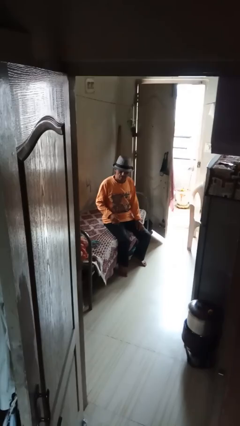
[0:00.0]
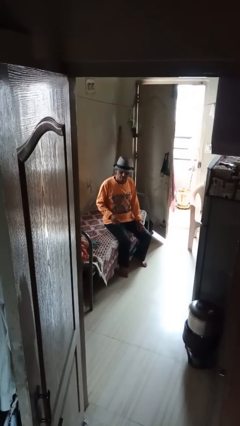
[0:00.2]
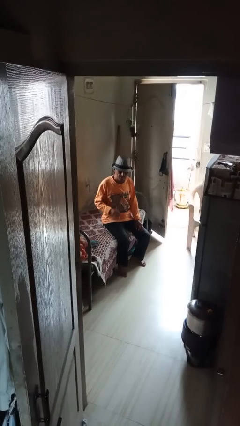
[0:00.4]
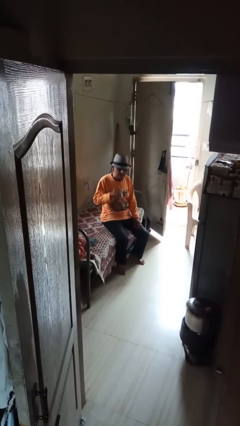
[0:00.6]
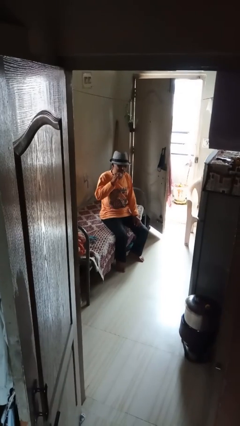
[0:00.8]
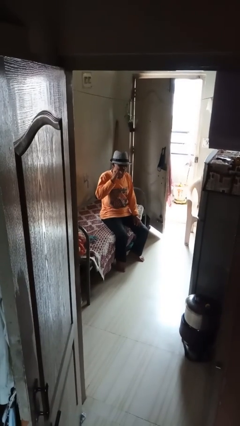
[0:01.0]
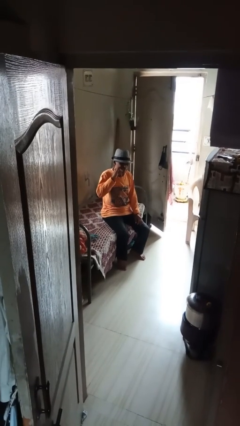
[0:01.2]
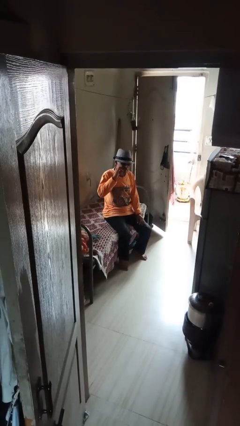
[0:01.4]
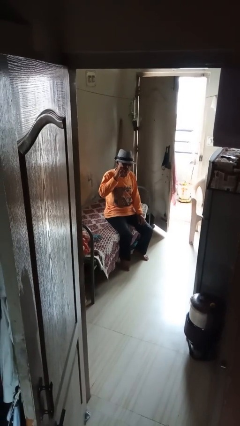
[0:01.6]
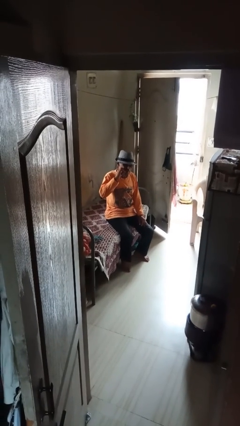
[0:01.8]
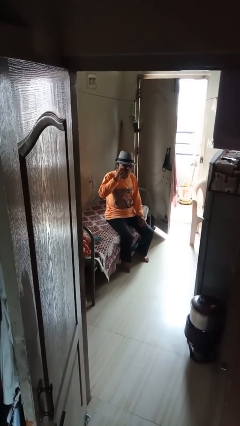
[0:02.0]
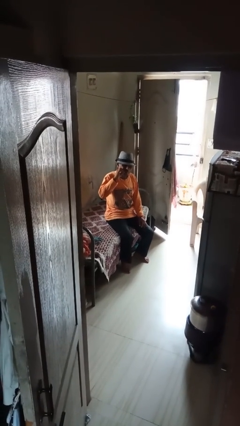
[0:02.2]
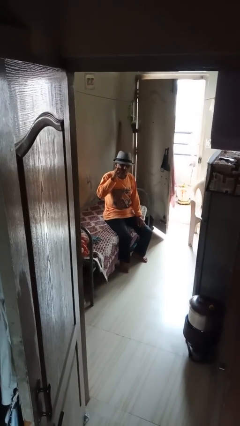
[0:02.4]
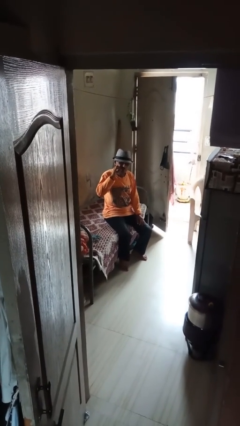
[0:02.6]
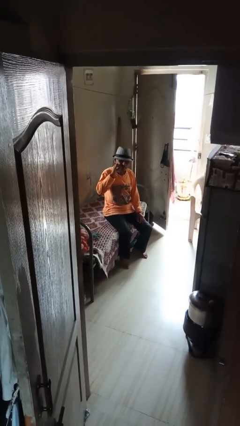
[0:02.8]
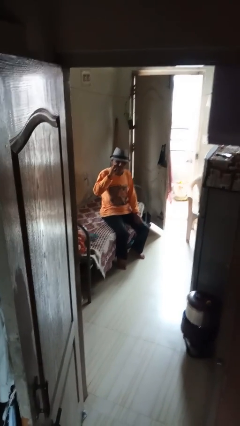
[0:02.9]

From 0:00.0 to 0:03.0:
person flosses

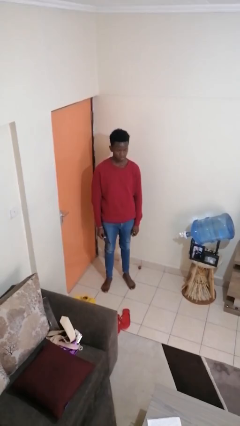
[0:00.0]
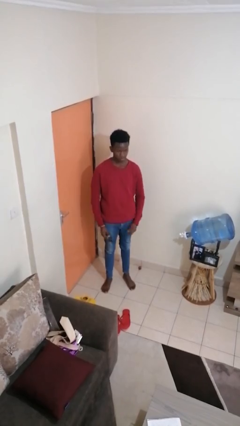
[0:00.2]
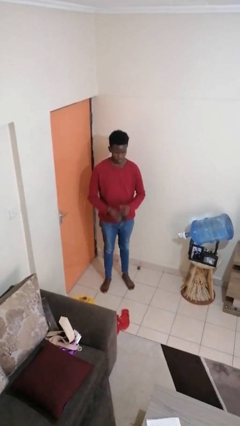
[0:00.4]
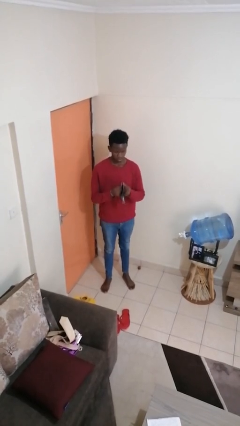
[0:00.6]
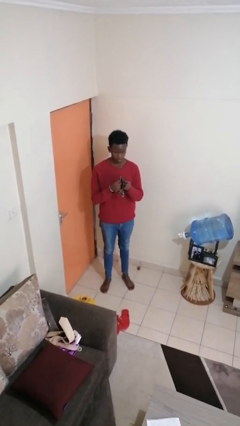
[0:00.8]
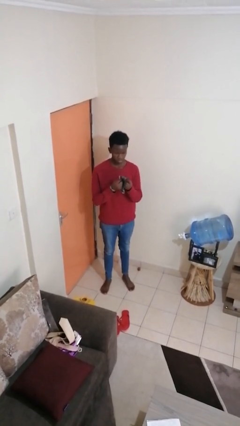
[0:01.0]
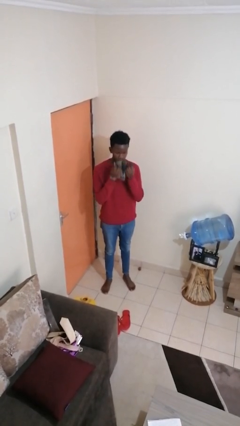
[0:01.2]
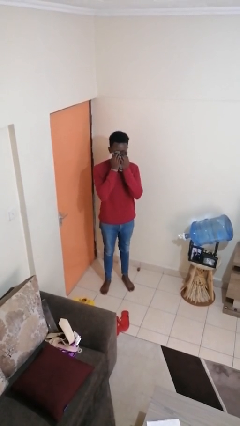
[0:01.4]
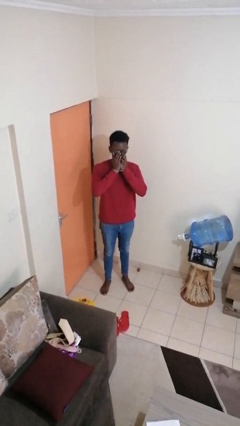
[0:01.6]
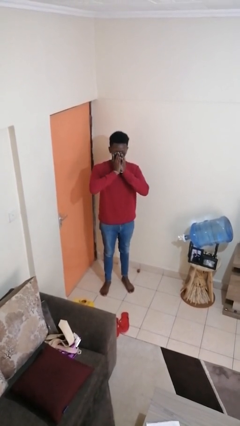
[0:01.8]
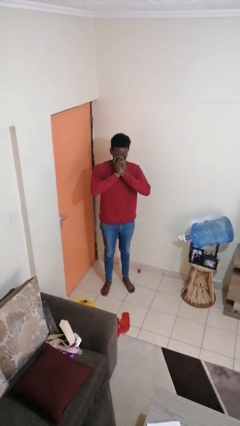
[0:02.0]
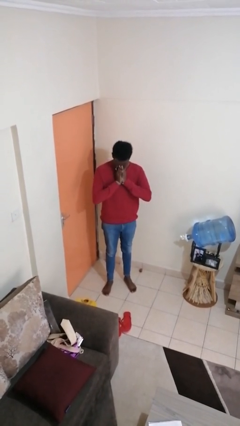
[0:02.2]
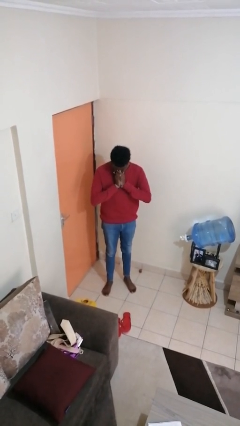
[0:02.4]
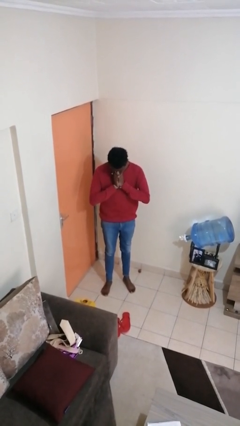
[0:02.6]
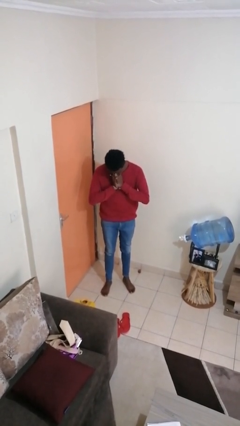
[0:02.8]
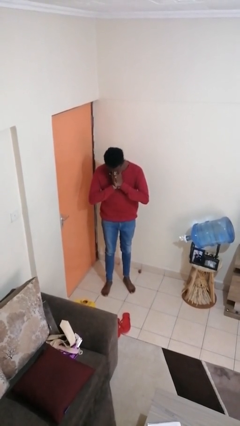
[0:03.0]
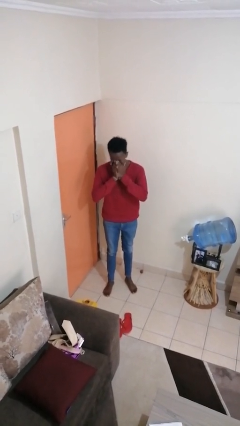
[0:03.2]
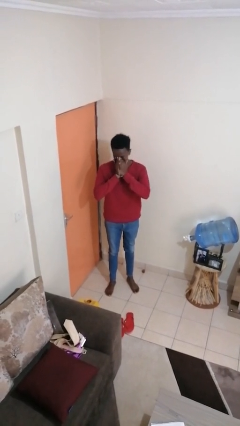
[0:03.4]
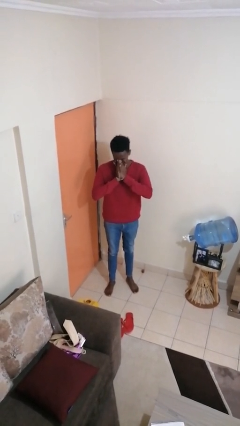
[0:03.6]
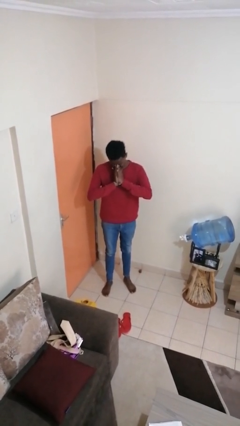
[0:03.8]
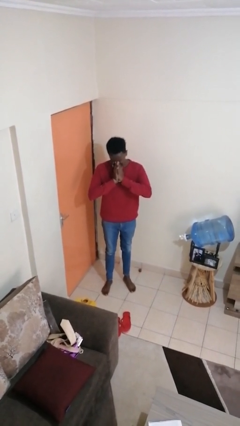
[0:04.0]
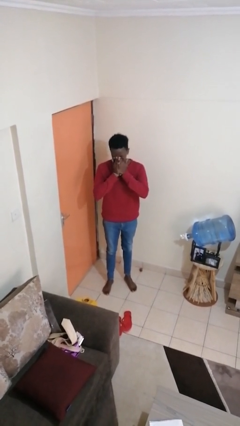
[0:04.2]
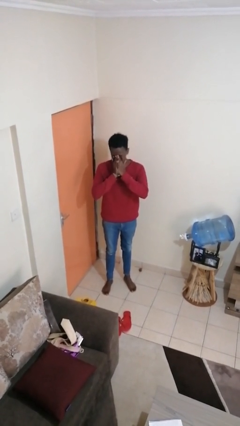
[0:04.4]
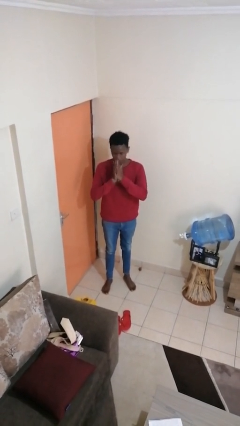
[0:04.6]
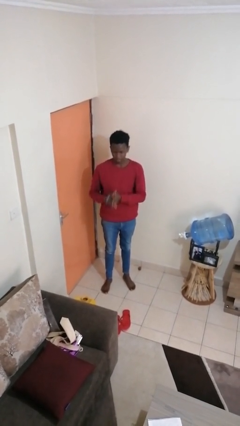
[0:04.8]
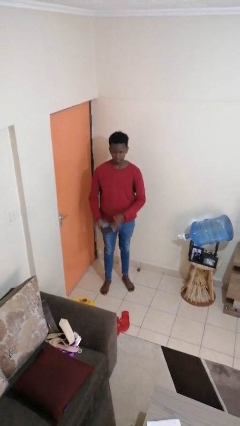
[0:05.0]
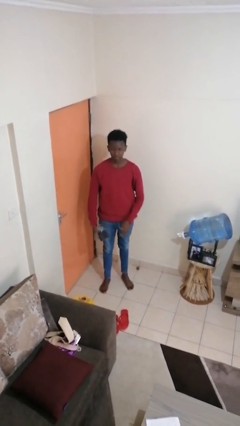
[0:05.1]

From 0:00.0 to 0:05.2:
person blows nose

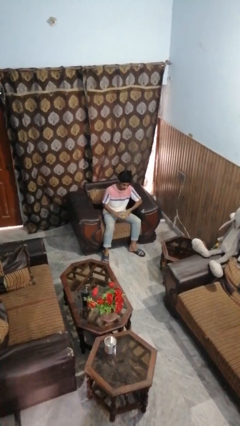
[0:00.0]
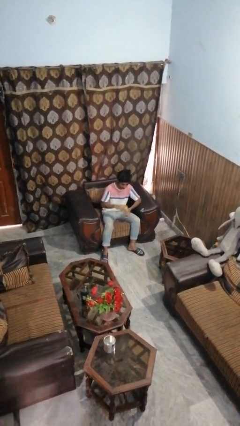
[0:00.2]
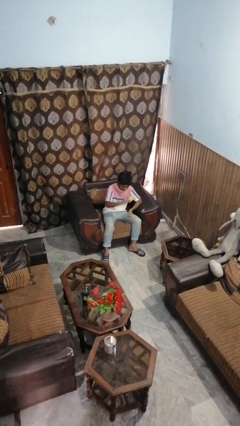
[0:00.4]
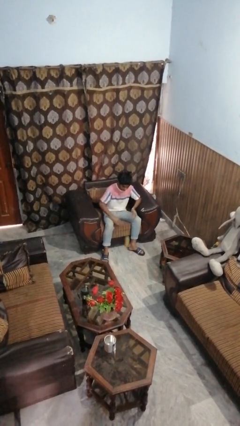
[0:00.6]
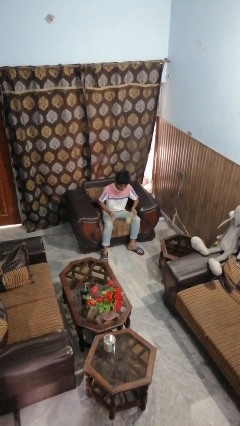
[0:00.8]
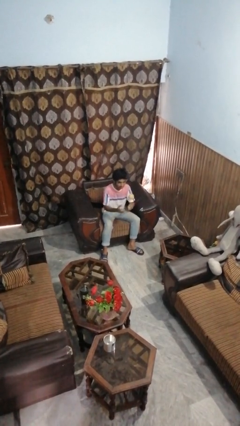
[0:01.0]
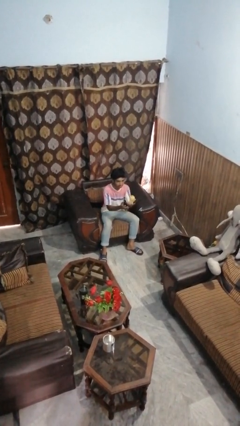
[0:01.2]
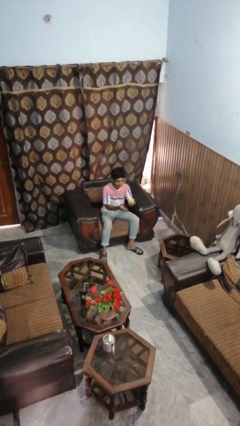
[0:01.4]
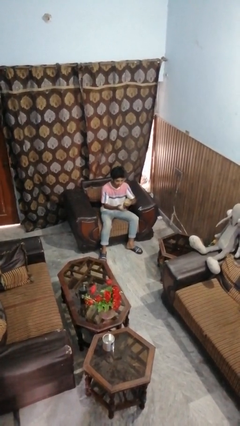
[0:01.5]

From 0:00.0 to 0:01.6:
person bounces ball on floor

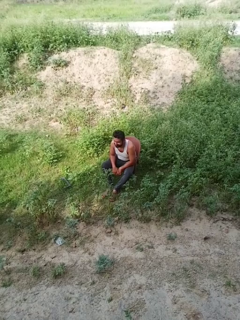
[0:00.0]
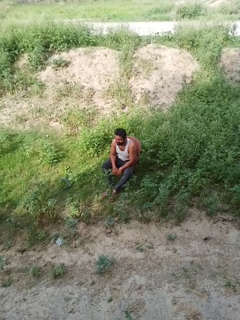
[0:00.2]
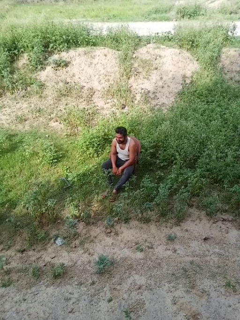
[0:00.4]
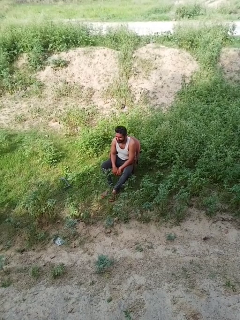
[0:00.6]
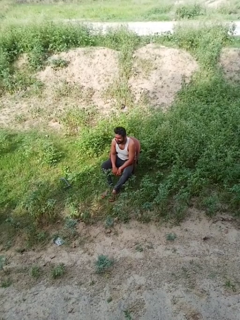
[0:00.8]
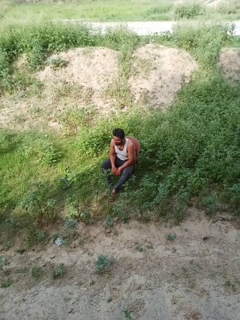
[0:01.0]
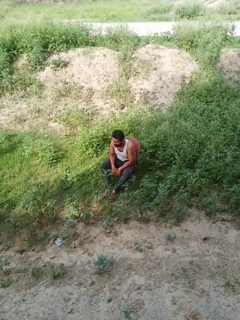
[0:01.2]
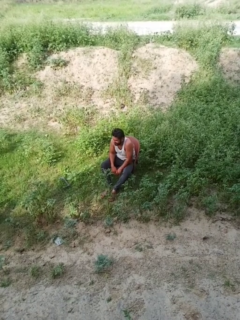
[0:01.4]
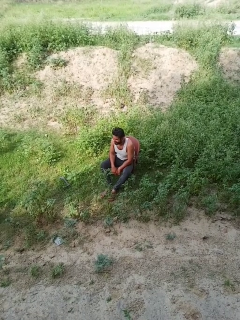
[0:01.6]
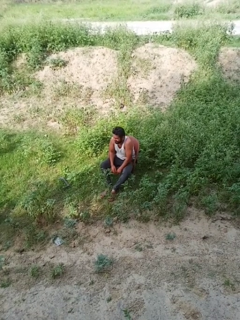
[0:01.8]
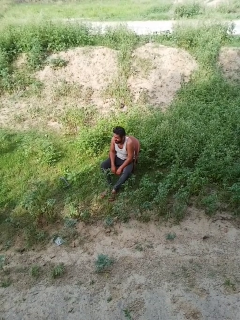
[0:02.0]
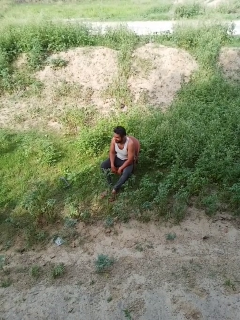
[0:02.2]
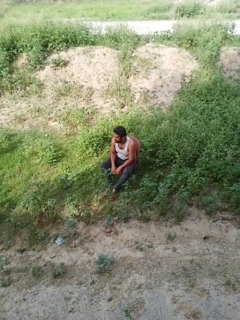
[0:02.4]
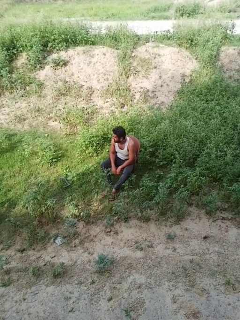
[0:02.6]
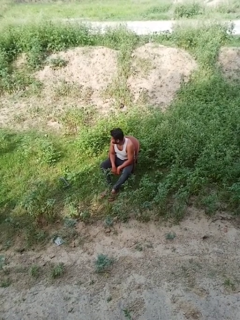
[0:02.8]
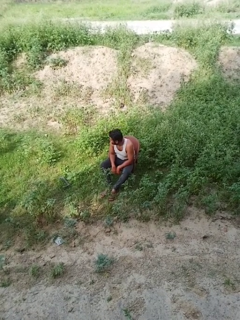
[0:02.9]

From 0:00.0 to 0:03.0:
person shrugs

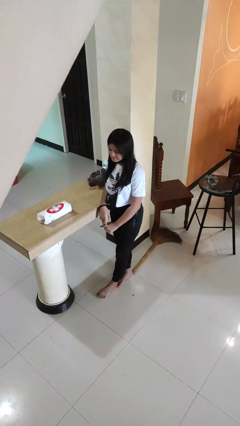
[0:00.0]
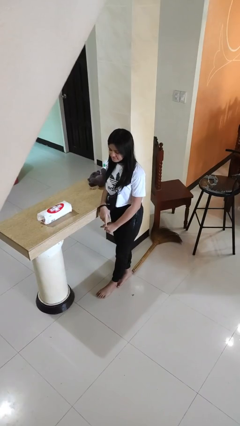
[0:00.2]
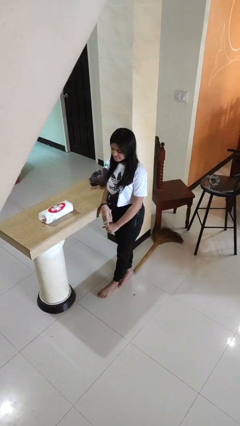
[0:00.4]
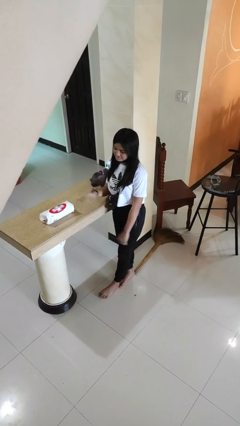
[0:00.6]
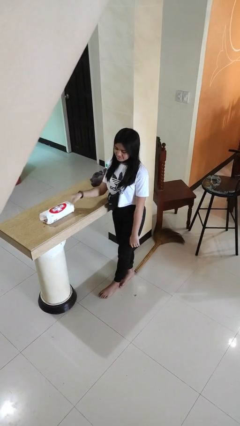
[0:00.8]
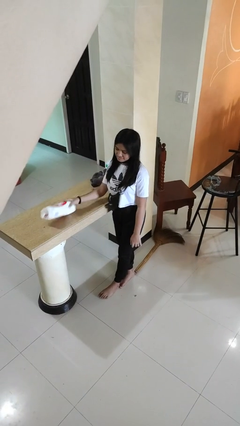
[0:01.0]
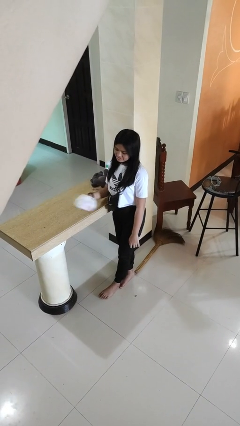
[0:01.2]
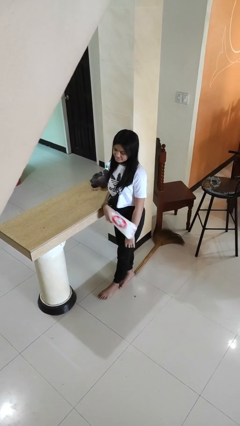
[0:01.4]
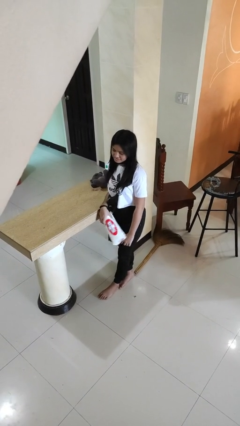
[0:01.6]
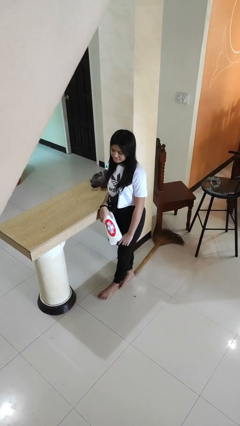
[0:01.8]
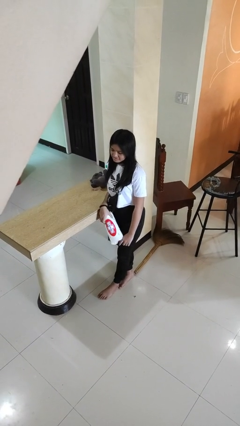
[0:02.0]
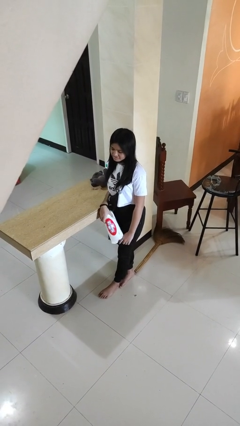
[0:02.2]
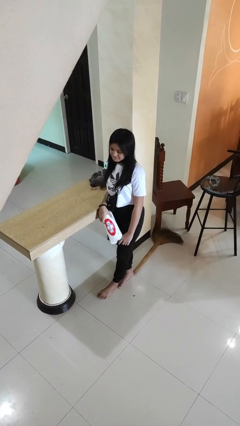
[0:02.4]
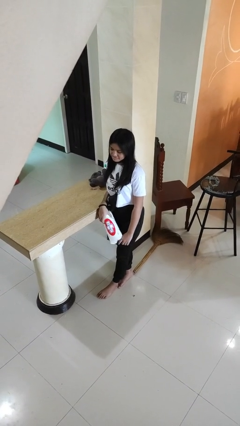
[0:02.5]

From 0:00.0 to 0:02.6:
person picks up object from countertop

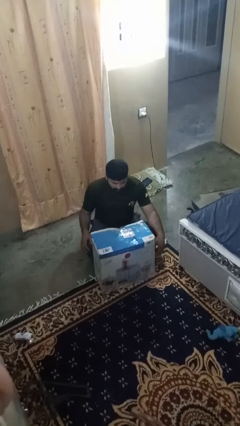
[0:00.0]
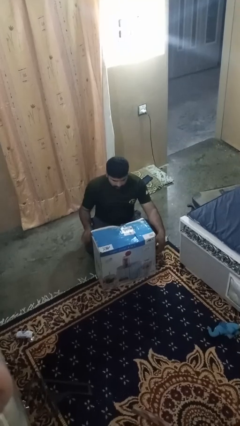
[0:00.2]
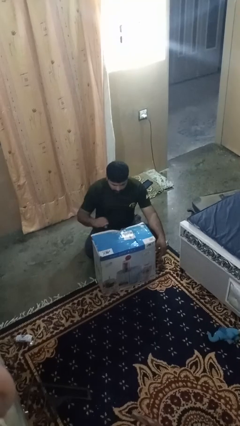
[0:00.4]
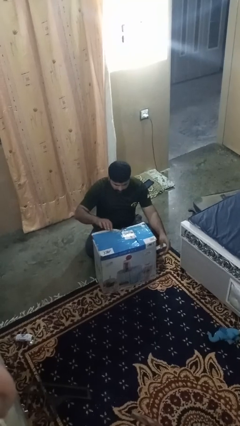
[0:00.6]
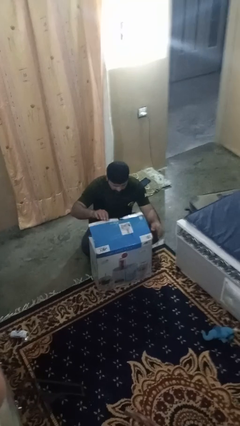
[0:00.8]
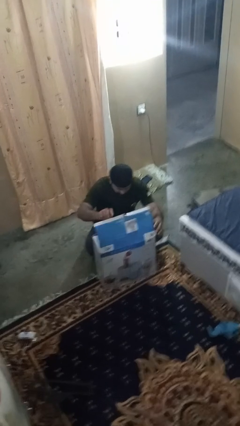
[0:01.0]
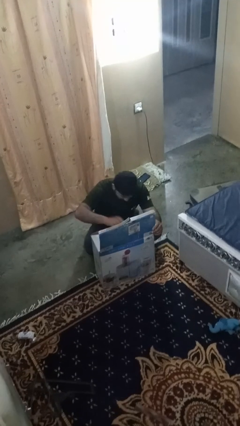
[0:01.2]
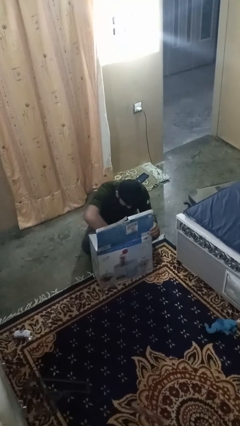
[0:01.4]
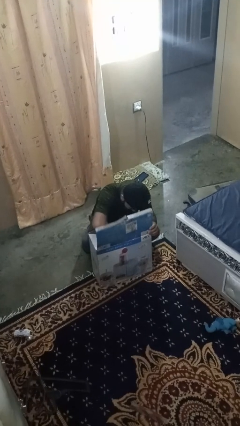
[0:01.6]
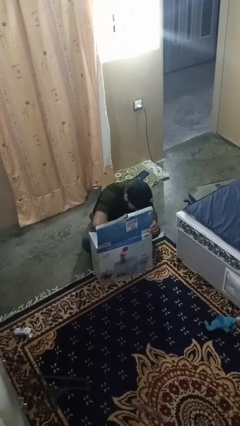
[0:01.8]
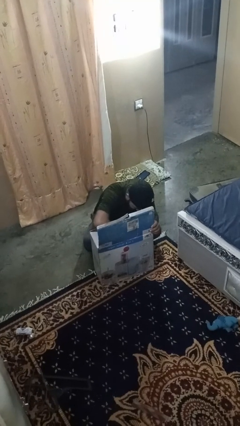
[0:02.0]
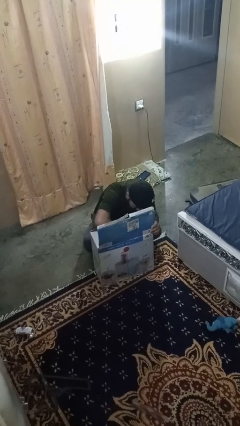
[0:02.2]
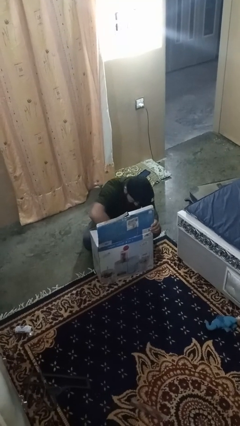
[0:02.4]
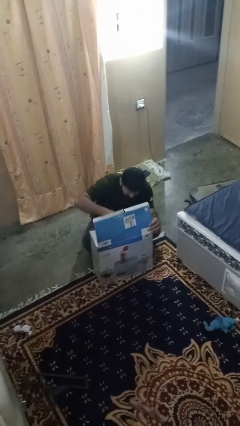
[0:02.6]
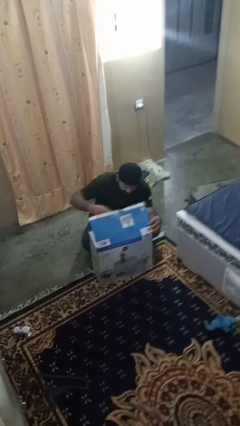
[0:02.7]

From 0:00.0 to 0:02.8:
person searches in box
